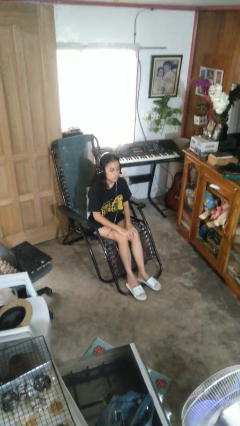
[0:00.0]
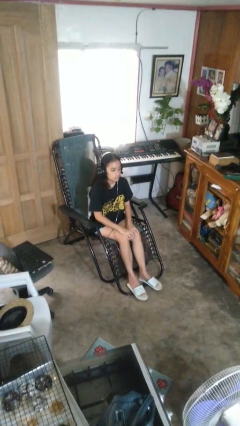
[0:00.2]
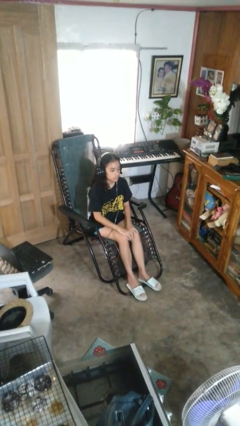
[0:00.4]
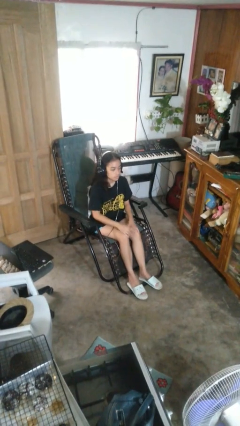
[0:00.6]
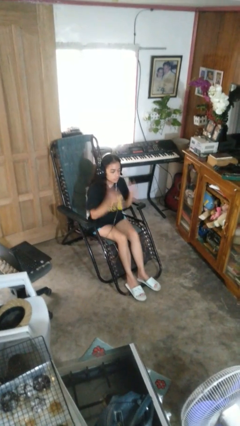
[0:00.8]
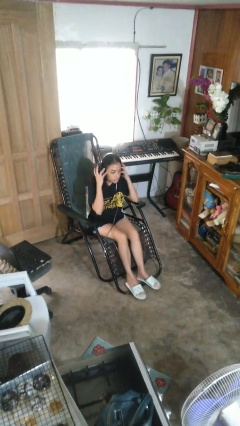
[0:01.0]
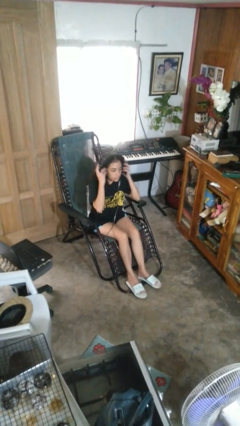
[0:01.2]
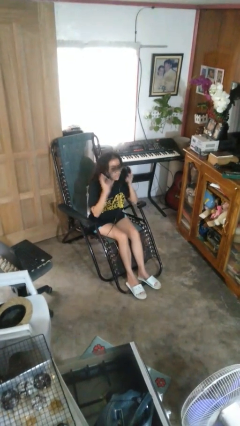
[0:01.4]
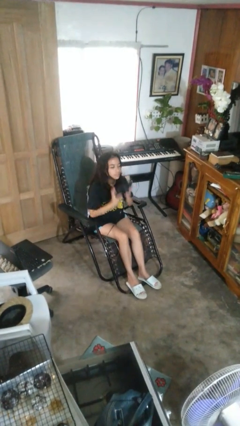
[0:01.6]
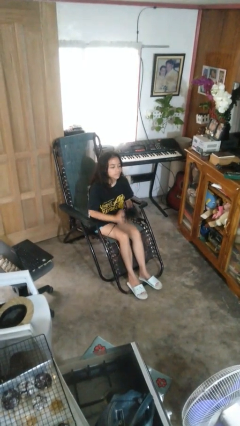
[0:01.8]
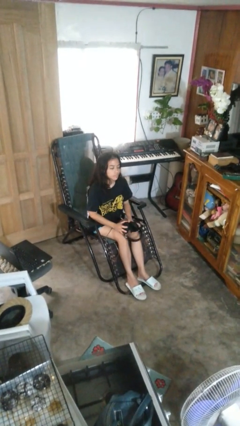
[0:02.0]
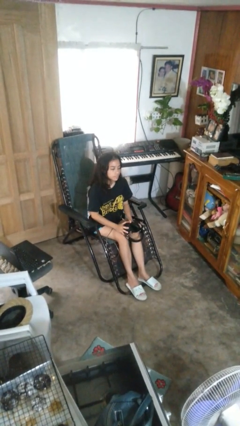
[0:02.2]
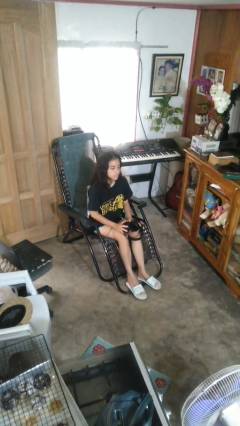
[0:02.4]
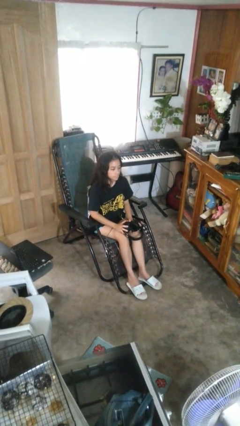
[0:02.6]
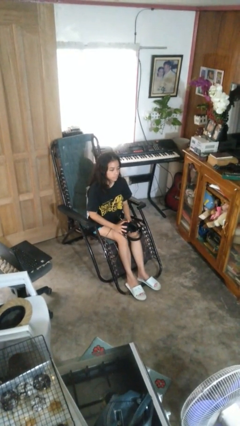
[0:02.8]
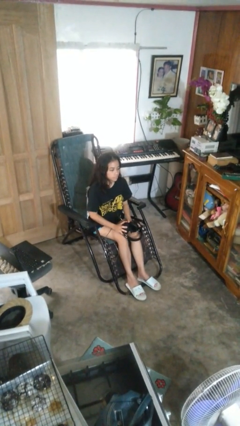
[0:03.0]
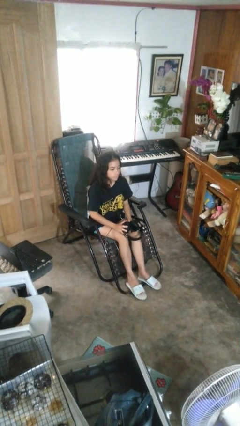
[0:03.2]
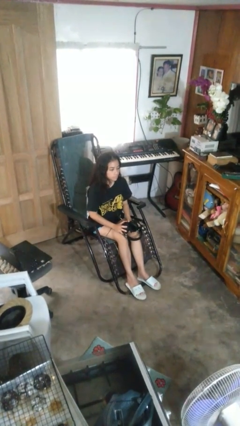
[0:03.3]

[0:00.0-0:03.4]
person takes off headphones

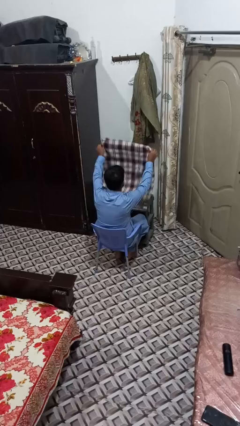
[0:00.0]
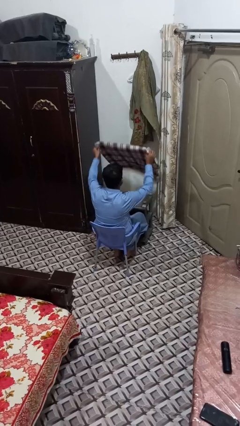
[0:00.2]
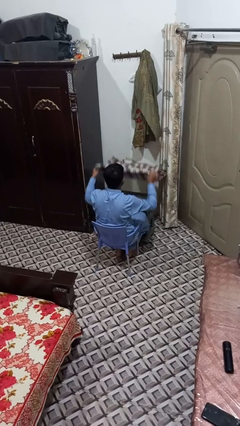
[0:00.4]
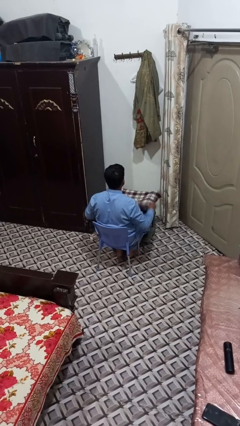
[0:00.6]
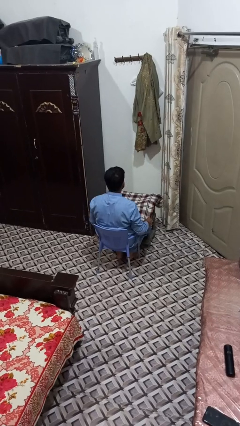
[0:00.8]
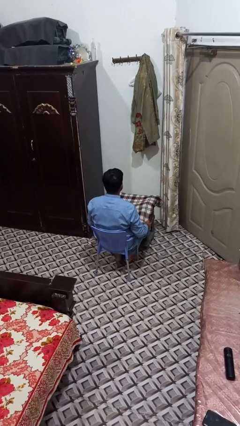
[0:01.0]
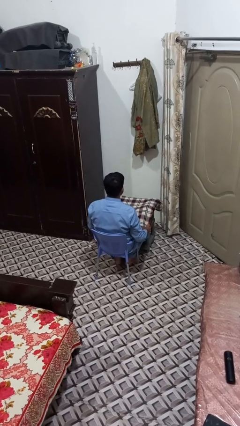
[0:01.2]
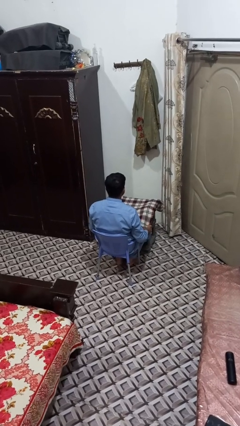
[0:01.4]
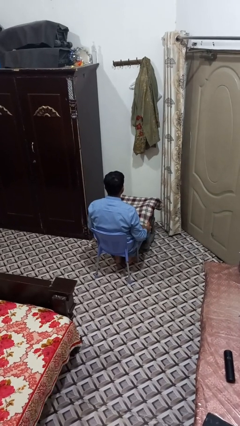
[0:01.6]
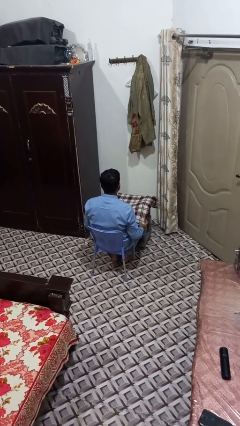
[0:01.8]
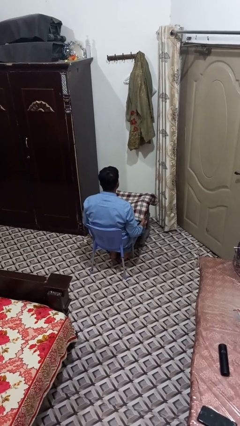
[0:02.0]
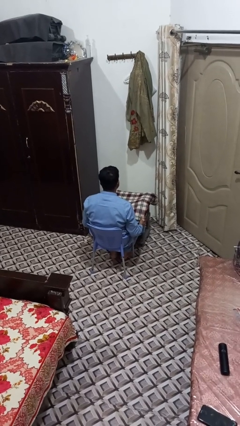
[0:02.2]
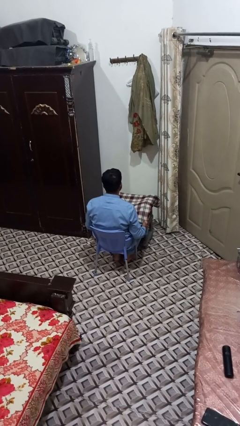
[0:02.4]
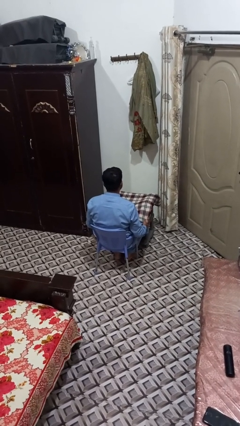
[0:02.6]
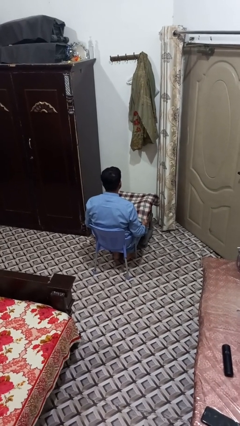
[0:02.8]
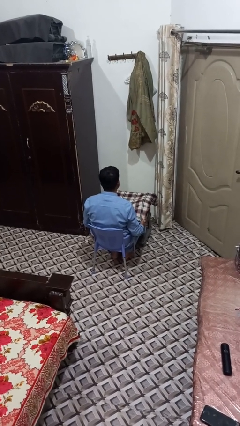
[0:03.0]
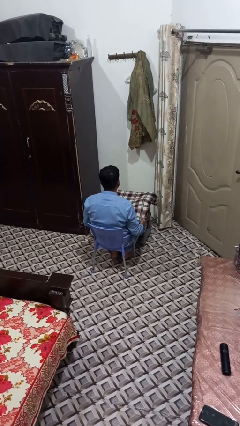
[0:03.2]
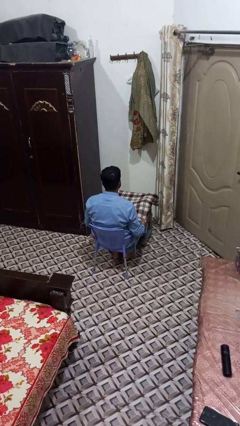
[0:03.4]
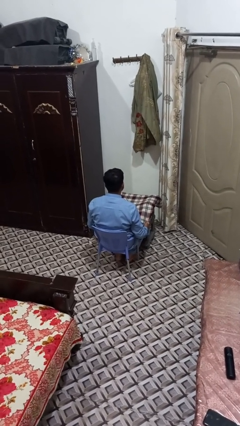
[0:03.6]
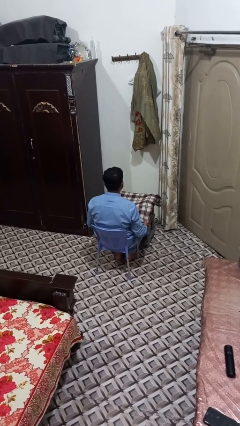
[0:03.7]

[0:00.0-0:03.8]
person spreads tablecloth

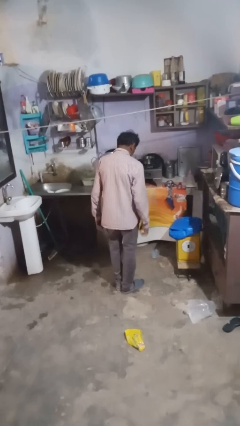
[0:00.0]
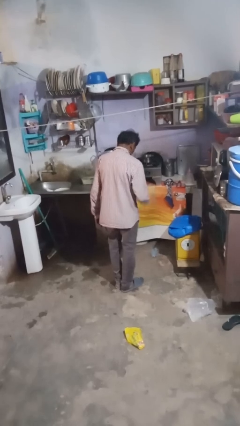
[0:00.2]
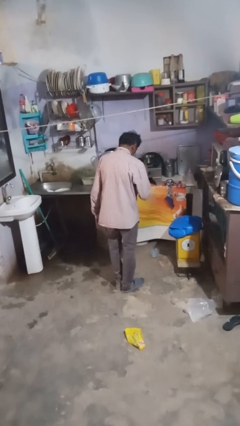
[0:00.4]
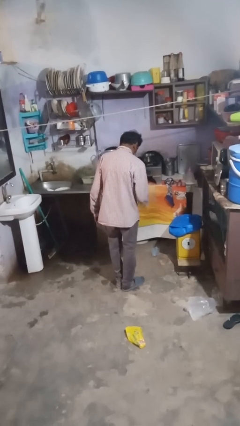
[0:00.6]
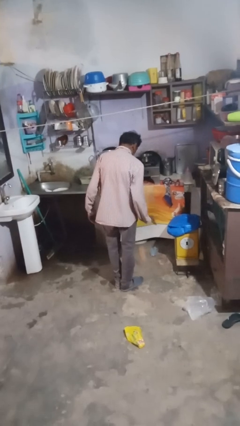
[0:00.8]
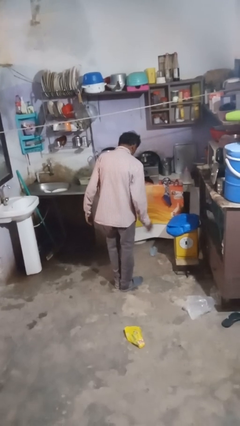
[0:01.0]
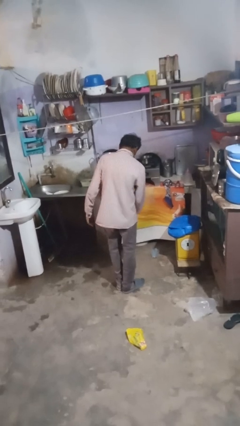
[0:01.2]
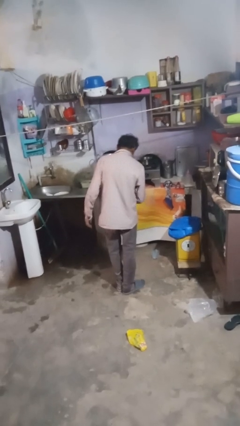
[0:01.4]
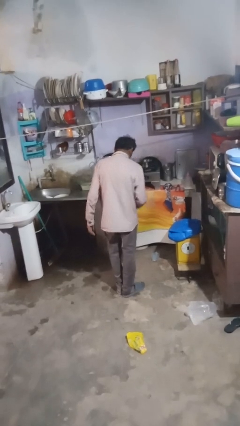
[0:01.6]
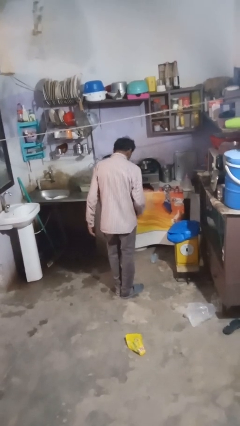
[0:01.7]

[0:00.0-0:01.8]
person bounces ball on floor

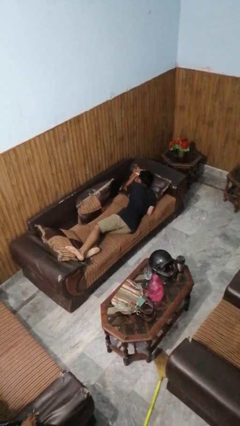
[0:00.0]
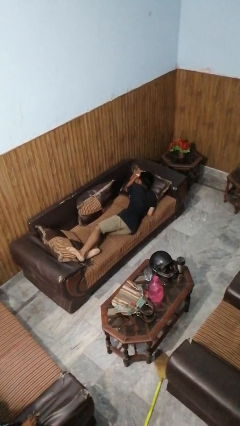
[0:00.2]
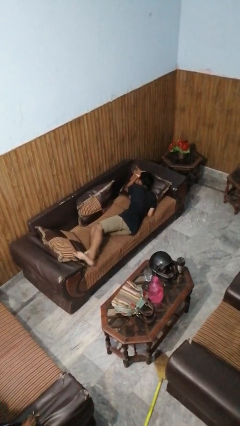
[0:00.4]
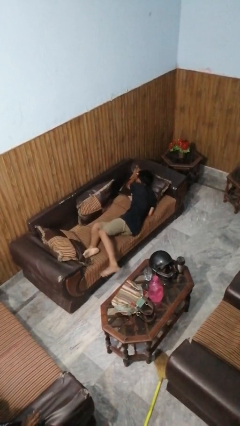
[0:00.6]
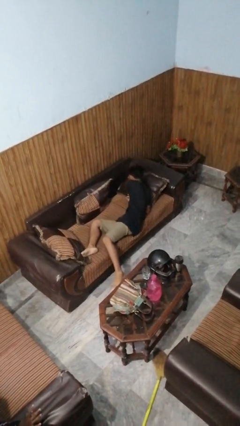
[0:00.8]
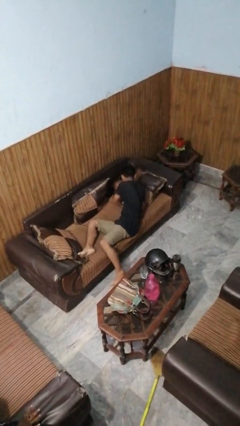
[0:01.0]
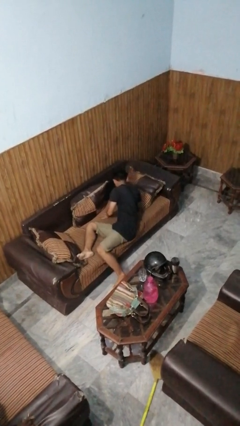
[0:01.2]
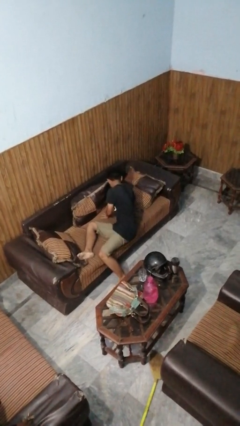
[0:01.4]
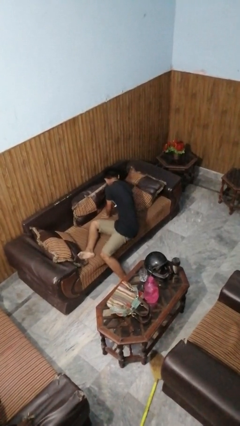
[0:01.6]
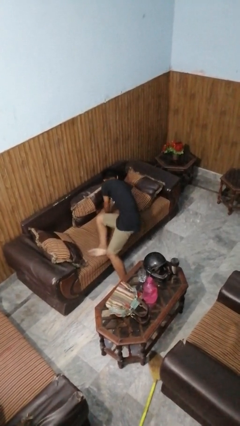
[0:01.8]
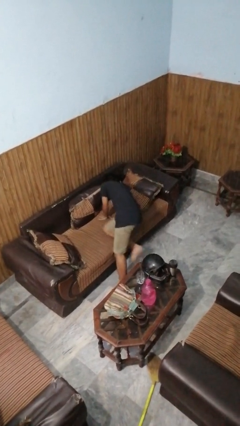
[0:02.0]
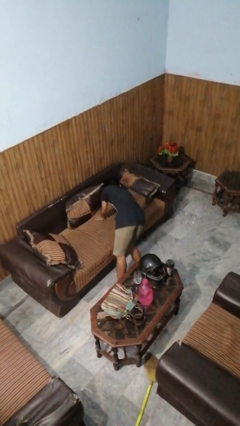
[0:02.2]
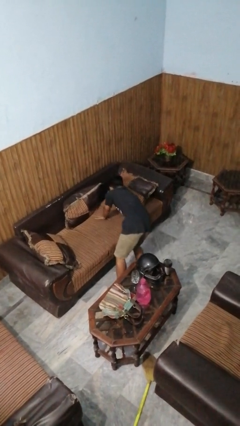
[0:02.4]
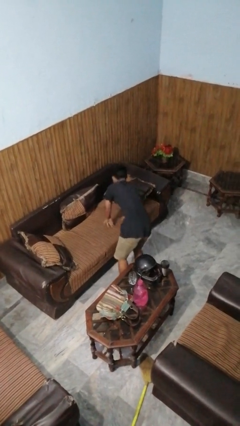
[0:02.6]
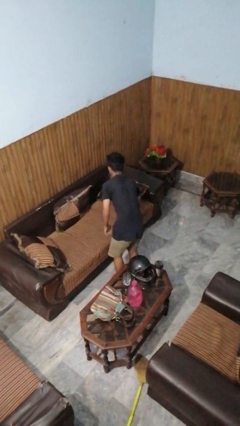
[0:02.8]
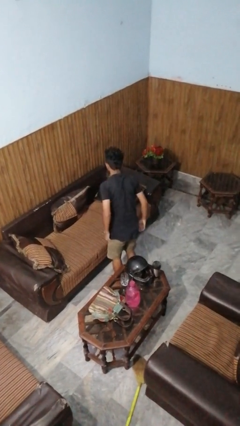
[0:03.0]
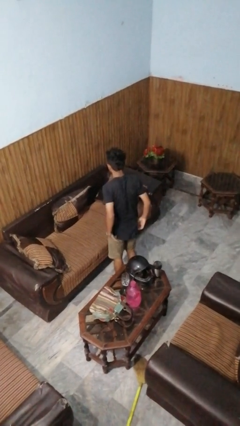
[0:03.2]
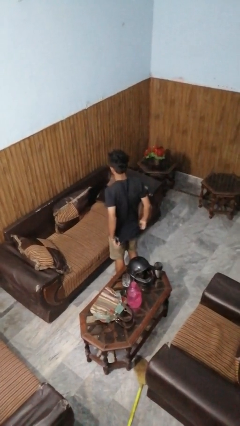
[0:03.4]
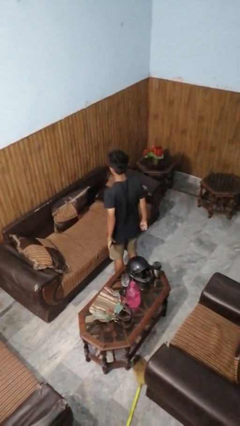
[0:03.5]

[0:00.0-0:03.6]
person stands up

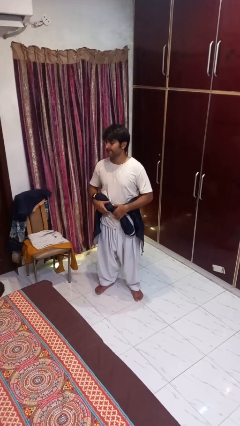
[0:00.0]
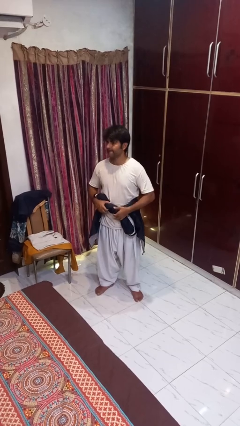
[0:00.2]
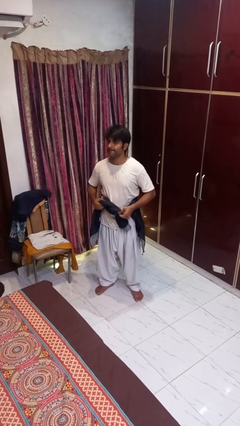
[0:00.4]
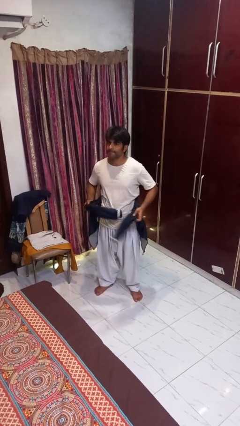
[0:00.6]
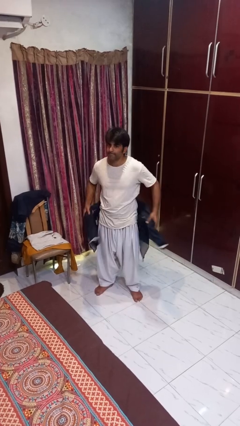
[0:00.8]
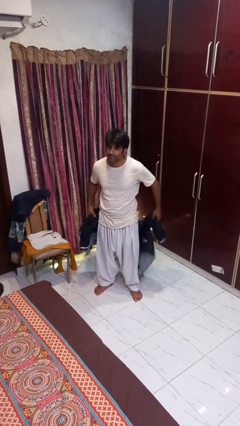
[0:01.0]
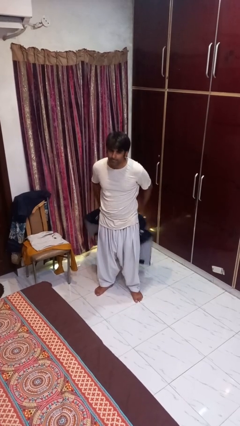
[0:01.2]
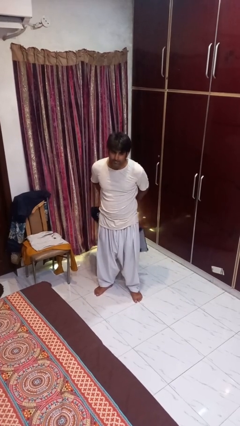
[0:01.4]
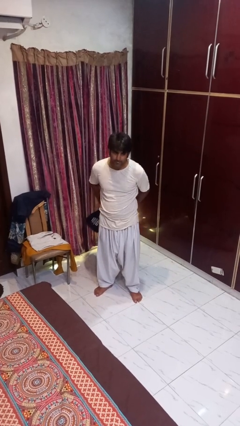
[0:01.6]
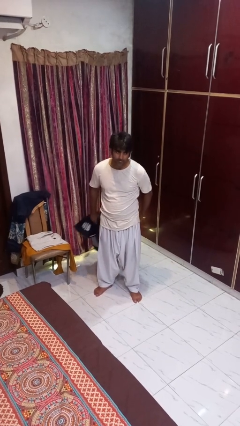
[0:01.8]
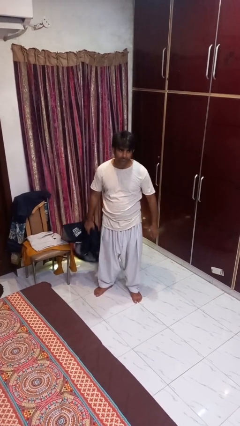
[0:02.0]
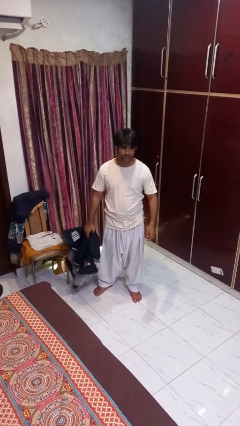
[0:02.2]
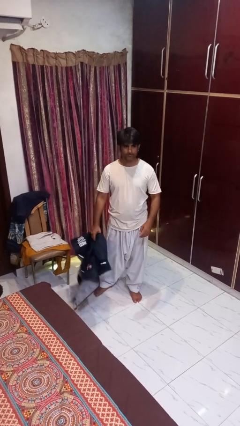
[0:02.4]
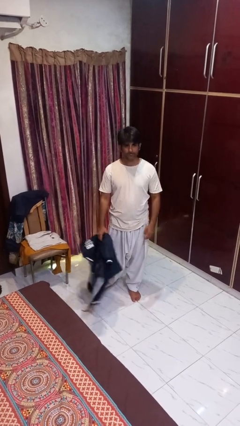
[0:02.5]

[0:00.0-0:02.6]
person unties jacket around waist

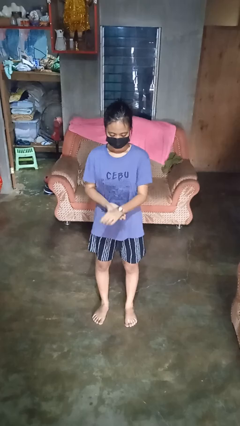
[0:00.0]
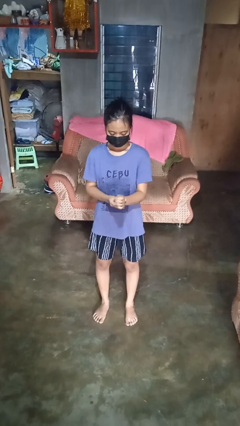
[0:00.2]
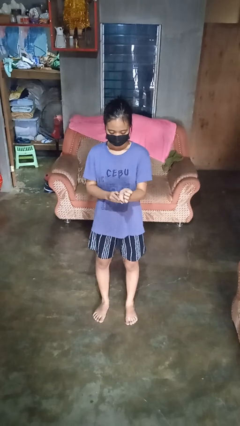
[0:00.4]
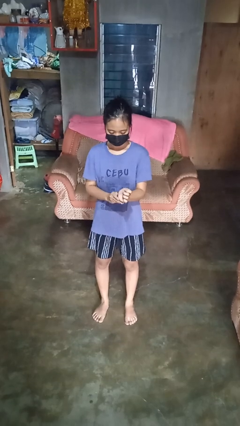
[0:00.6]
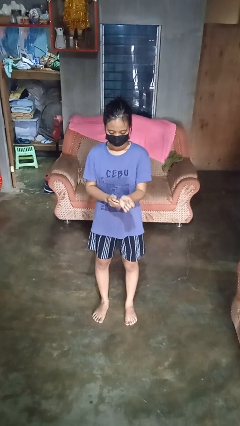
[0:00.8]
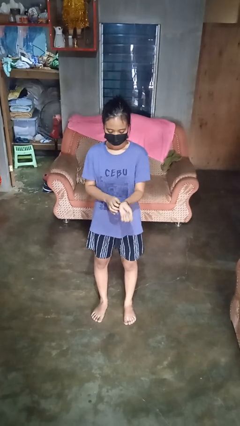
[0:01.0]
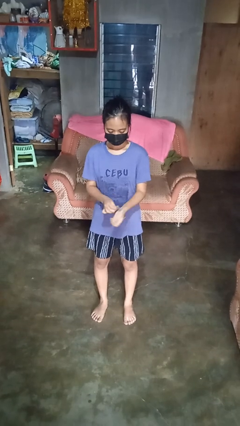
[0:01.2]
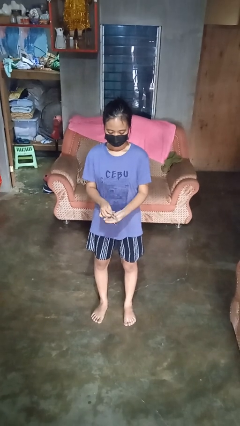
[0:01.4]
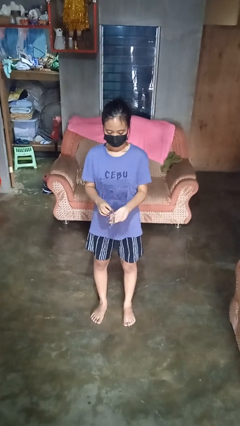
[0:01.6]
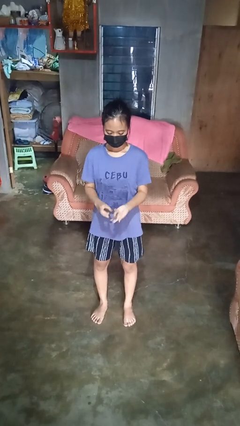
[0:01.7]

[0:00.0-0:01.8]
person takes off wristwatch

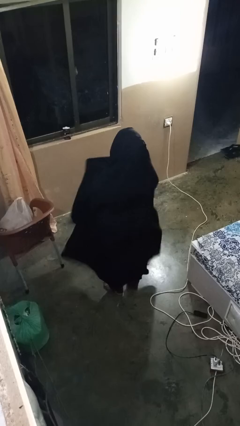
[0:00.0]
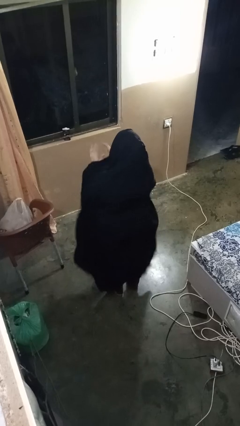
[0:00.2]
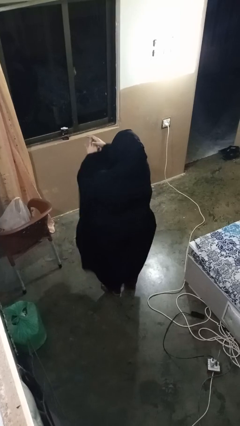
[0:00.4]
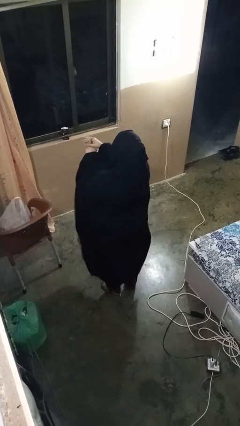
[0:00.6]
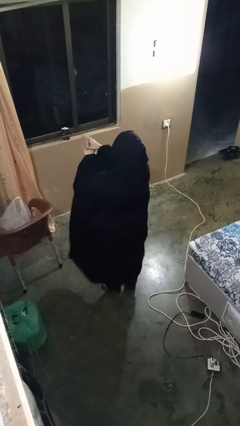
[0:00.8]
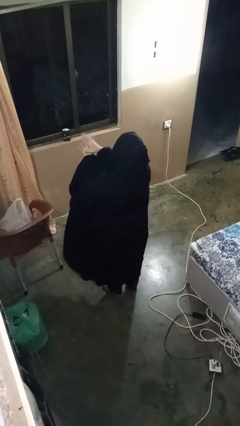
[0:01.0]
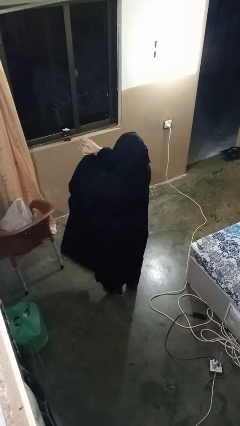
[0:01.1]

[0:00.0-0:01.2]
person cracks knuckles
